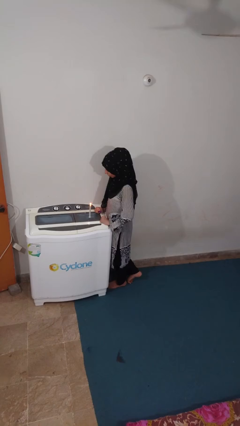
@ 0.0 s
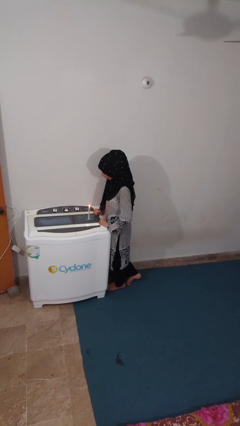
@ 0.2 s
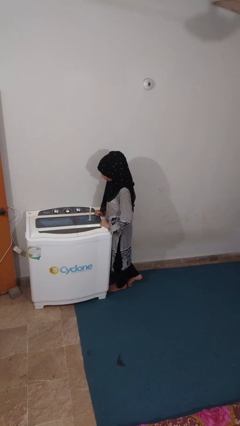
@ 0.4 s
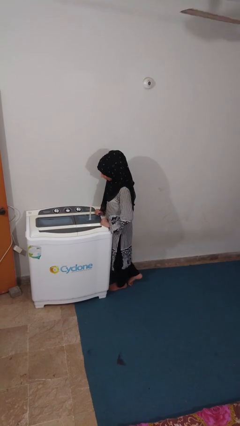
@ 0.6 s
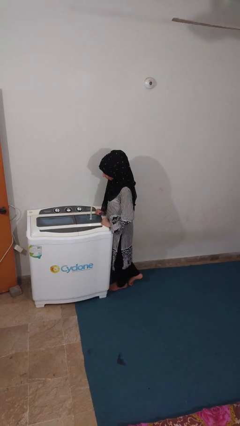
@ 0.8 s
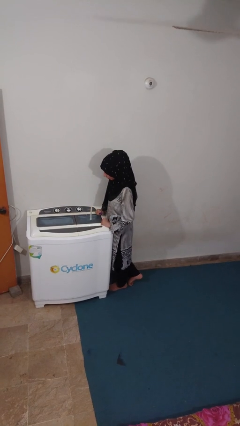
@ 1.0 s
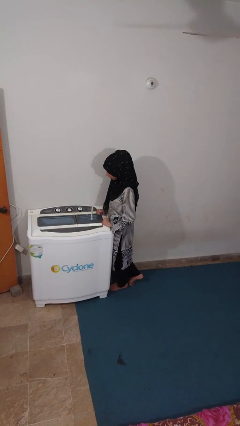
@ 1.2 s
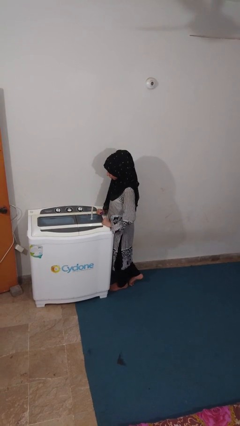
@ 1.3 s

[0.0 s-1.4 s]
person extinguishes candle

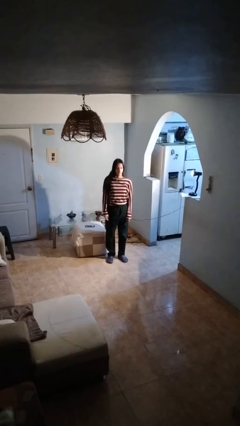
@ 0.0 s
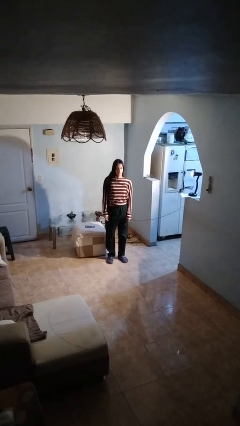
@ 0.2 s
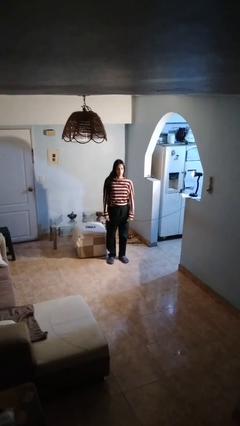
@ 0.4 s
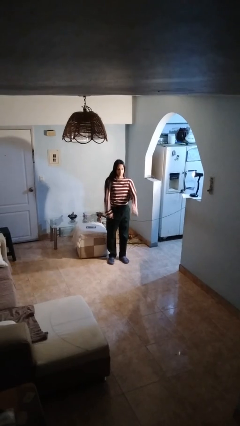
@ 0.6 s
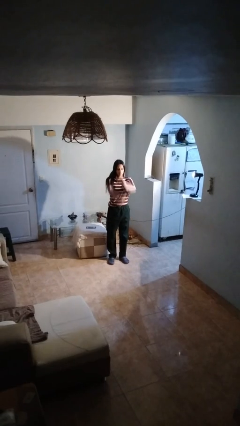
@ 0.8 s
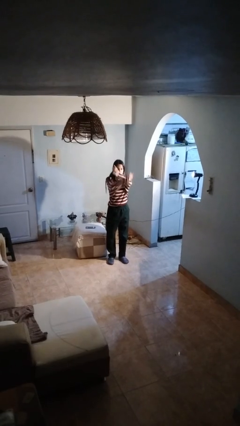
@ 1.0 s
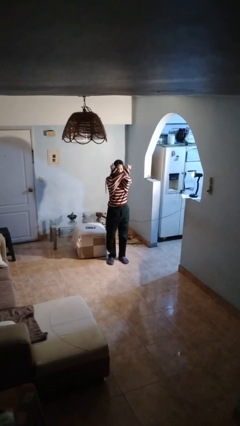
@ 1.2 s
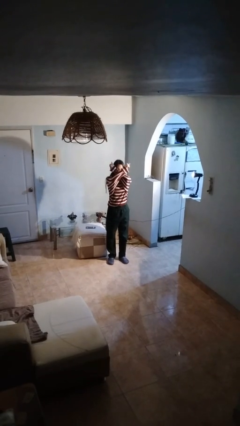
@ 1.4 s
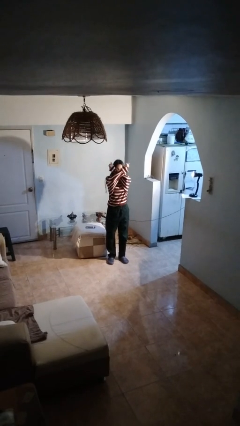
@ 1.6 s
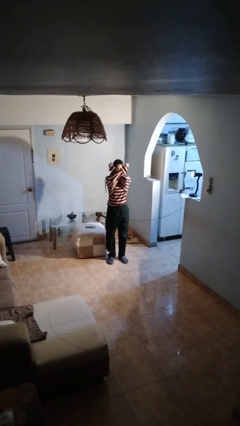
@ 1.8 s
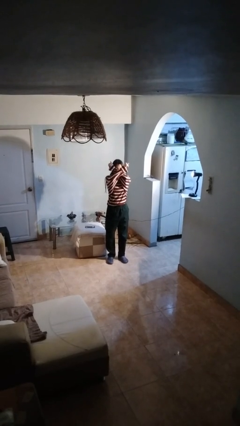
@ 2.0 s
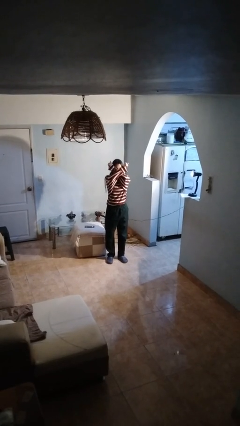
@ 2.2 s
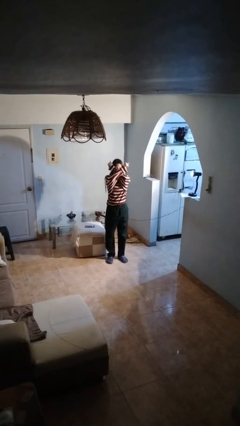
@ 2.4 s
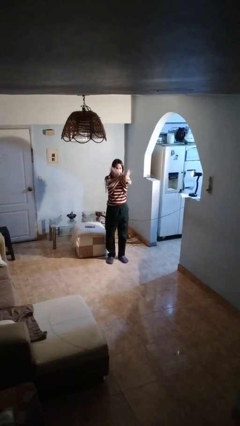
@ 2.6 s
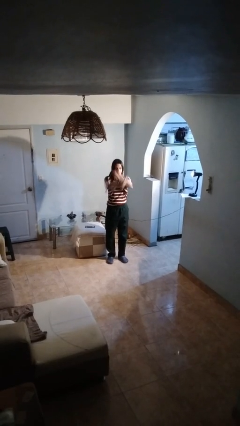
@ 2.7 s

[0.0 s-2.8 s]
person gestures arms x

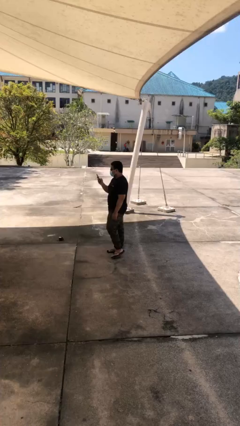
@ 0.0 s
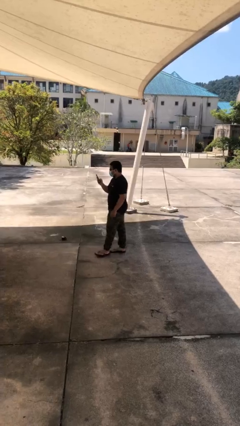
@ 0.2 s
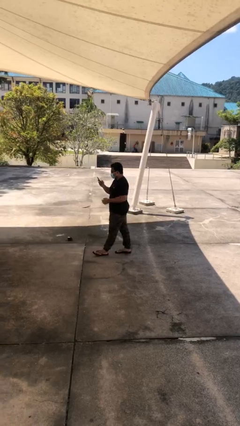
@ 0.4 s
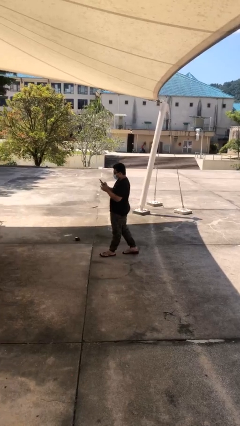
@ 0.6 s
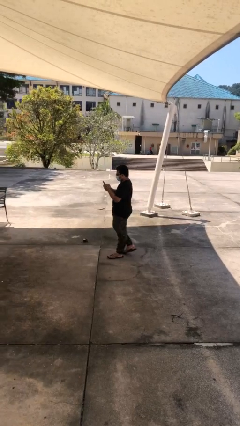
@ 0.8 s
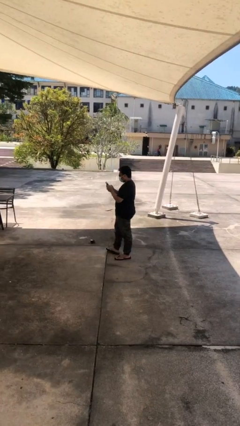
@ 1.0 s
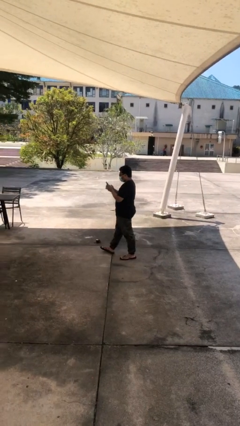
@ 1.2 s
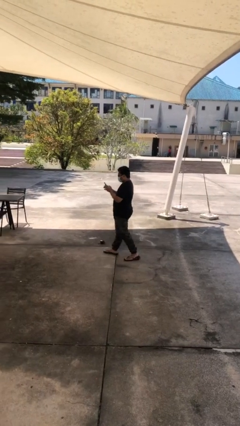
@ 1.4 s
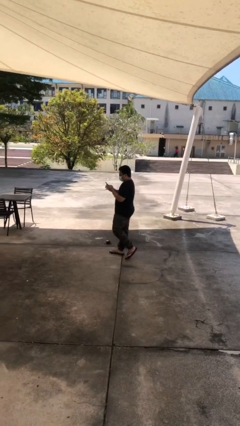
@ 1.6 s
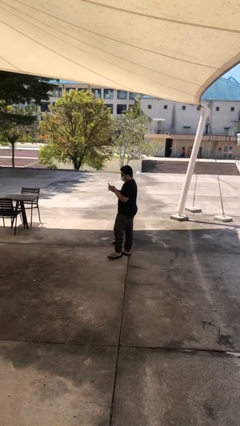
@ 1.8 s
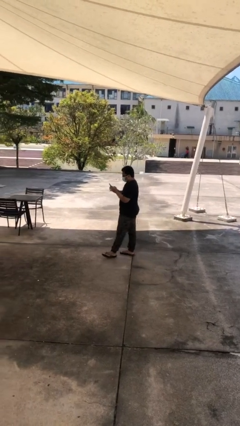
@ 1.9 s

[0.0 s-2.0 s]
person texts on phone

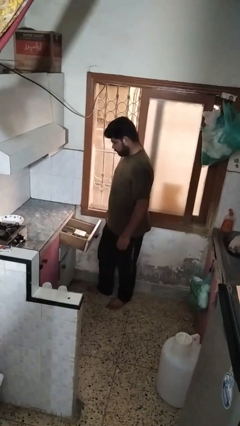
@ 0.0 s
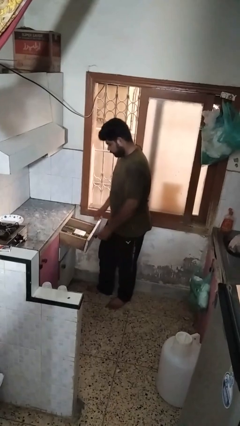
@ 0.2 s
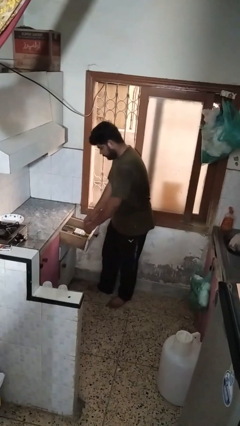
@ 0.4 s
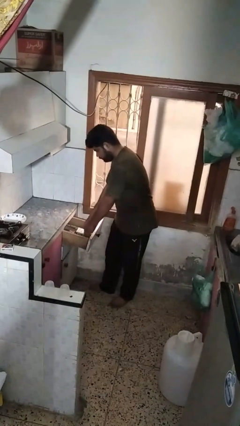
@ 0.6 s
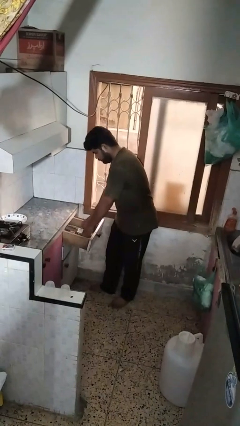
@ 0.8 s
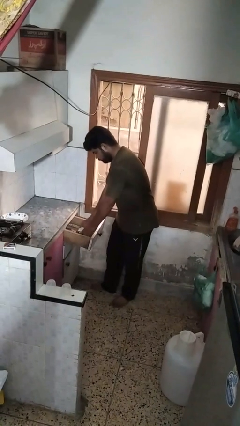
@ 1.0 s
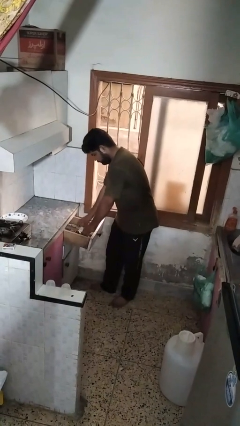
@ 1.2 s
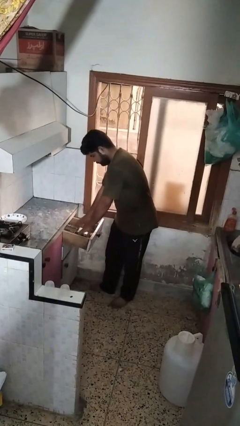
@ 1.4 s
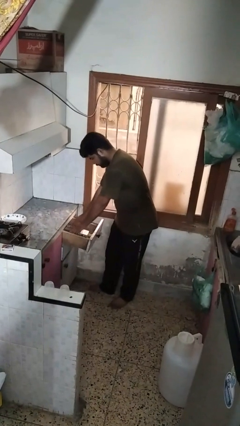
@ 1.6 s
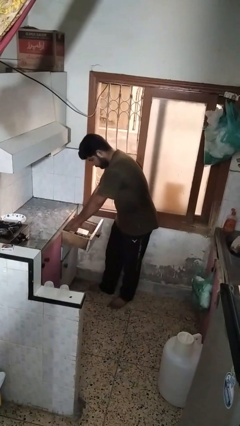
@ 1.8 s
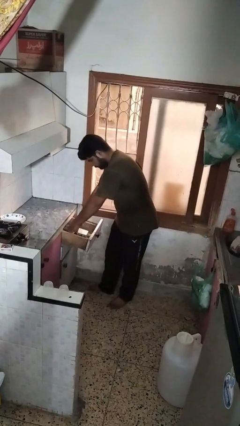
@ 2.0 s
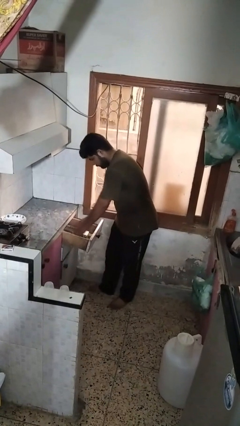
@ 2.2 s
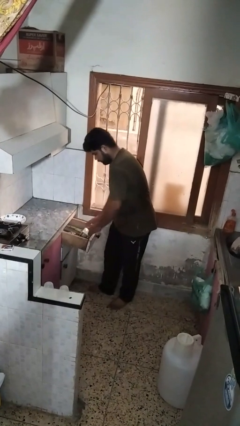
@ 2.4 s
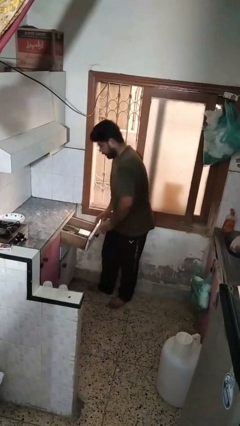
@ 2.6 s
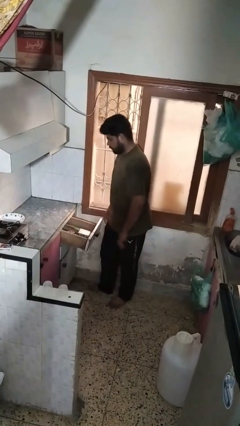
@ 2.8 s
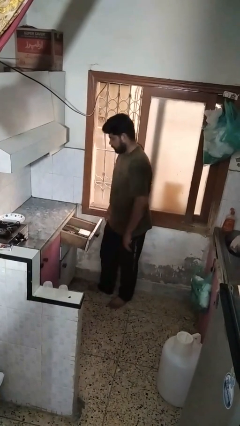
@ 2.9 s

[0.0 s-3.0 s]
person searches in kitchen drawer

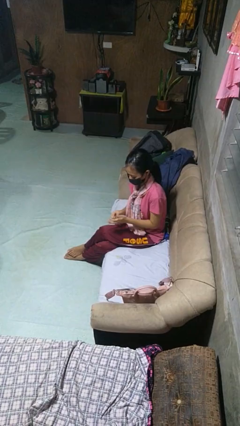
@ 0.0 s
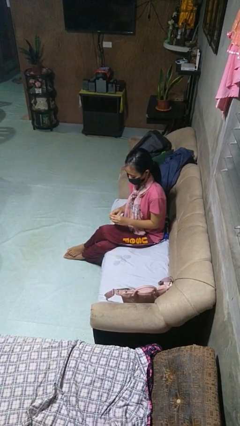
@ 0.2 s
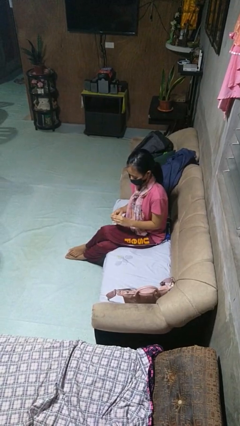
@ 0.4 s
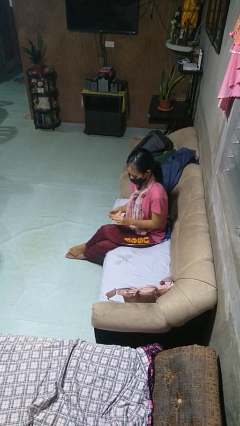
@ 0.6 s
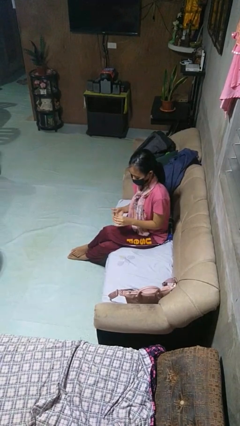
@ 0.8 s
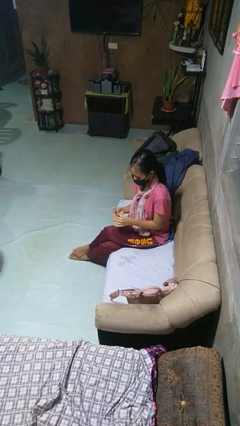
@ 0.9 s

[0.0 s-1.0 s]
person puts on ring

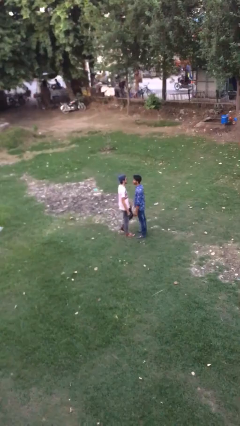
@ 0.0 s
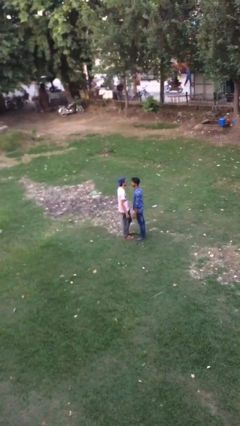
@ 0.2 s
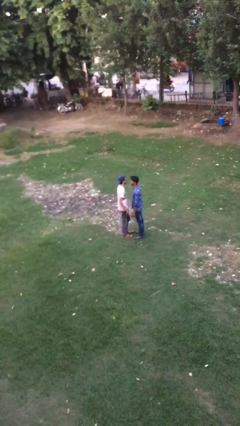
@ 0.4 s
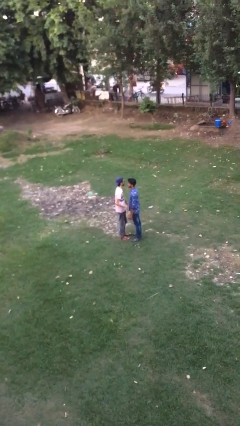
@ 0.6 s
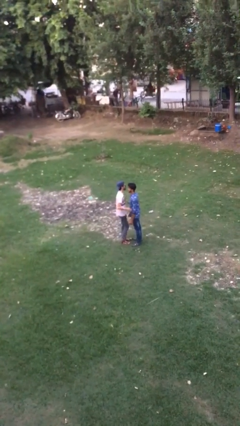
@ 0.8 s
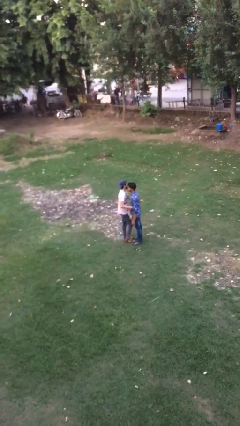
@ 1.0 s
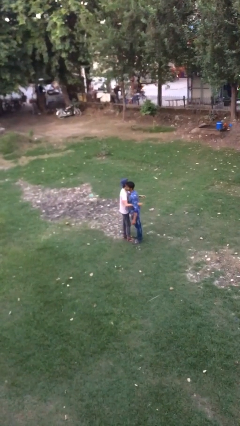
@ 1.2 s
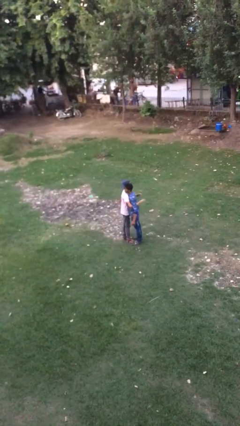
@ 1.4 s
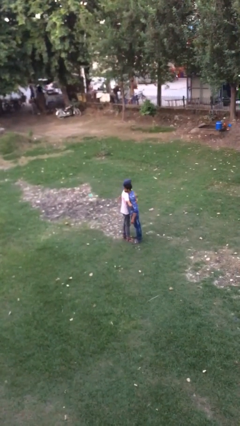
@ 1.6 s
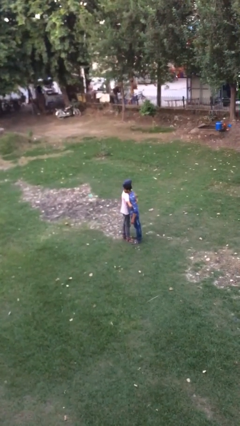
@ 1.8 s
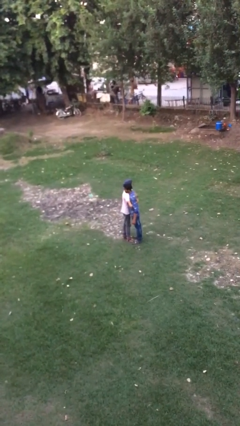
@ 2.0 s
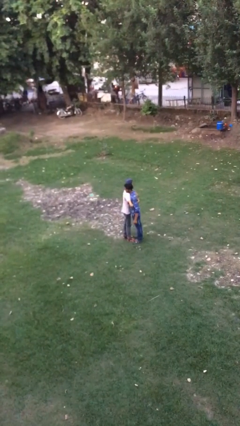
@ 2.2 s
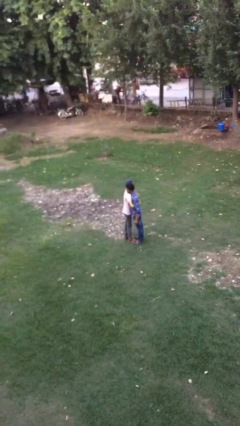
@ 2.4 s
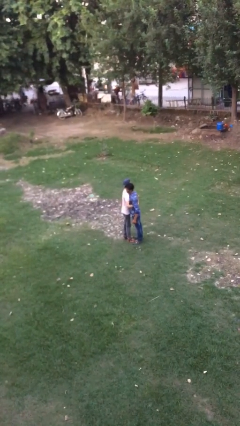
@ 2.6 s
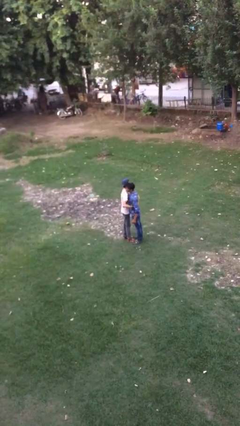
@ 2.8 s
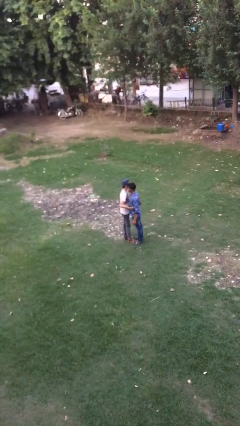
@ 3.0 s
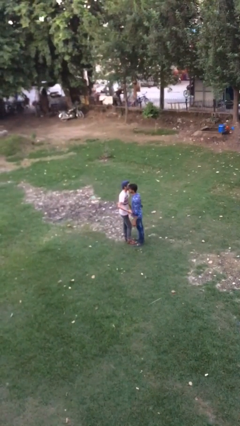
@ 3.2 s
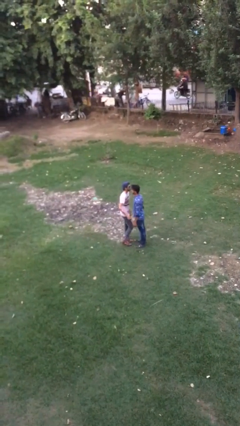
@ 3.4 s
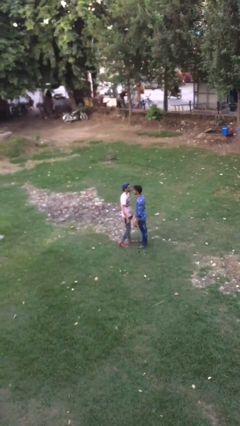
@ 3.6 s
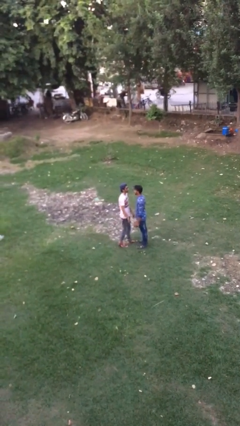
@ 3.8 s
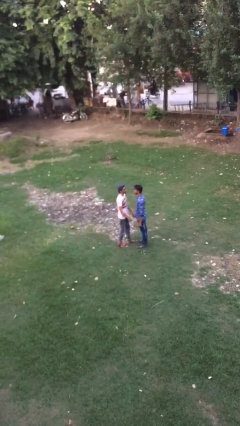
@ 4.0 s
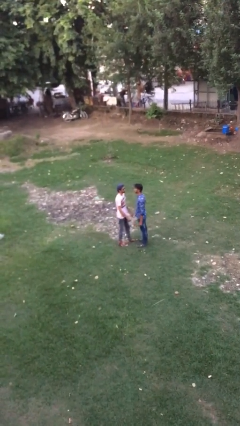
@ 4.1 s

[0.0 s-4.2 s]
person embraces person

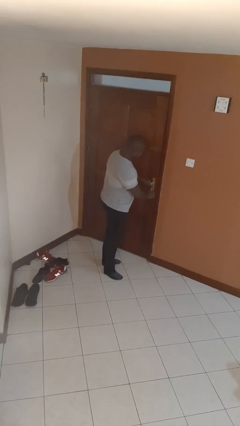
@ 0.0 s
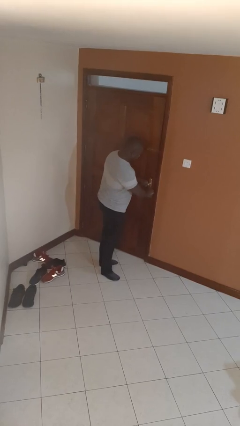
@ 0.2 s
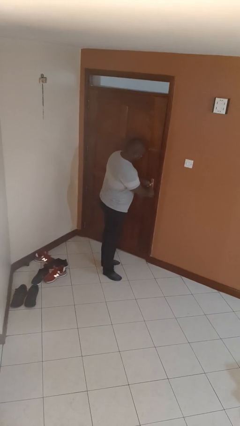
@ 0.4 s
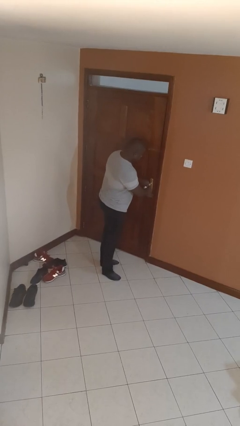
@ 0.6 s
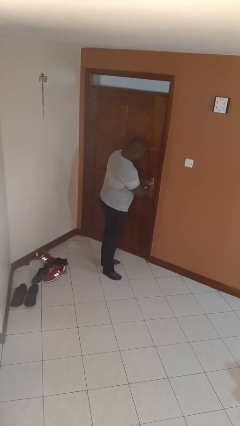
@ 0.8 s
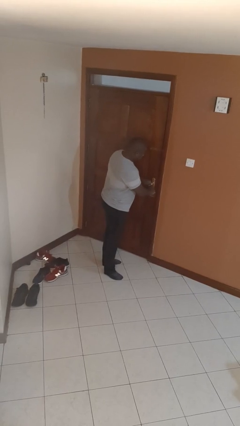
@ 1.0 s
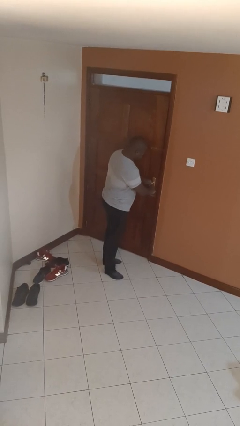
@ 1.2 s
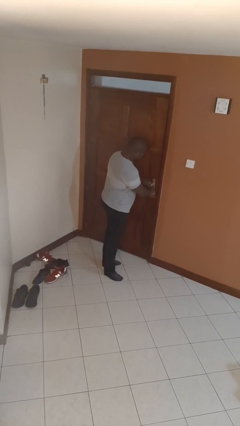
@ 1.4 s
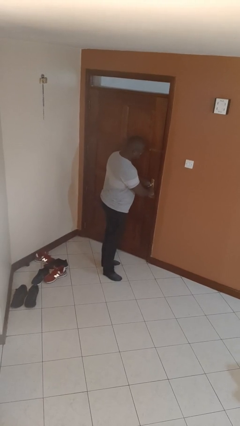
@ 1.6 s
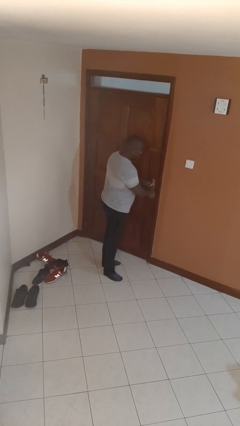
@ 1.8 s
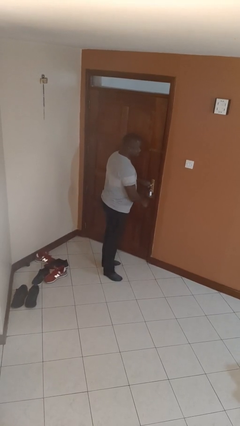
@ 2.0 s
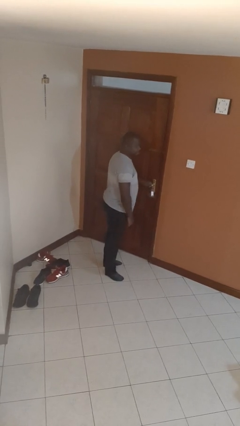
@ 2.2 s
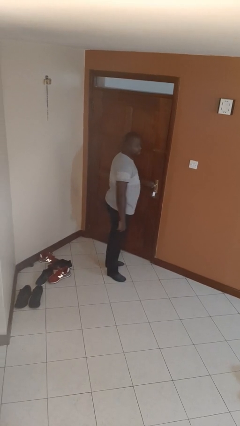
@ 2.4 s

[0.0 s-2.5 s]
person locks door with keys

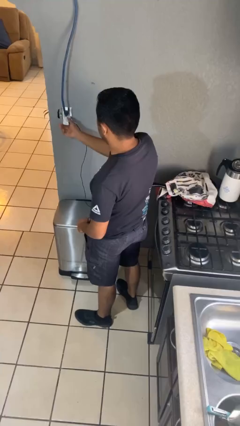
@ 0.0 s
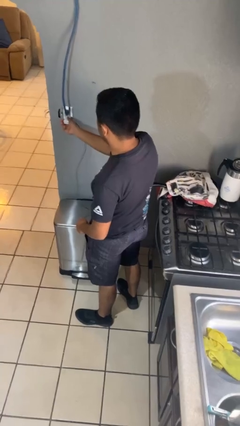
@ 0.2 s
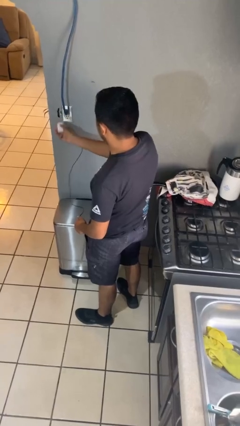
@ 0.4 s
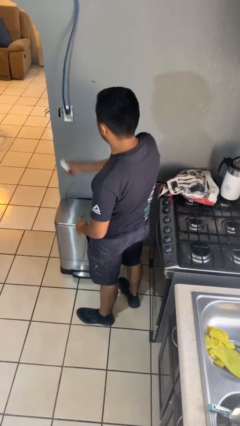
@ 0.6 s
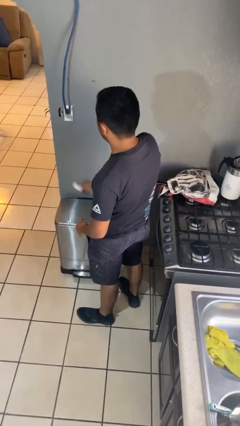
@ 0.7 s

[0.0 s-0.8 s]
person unplugs from electrical socket
